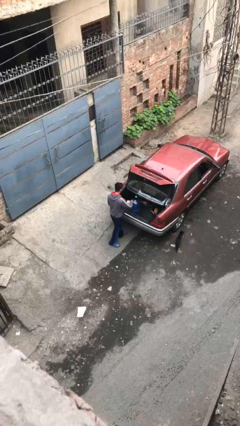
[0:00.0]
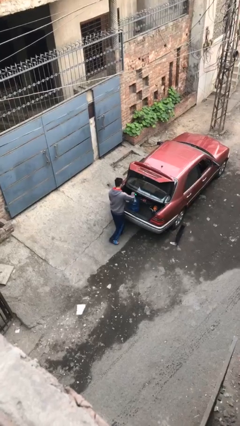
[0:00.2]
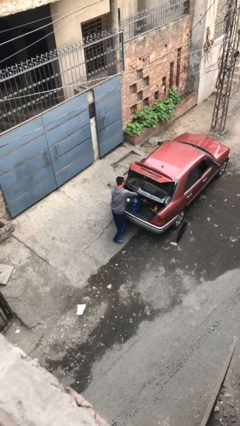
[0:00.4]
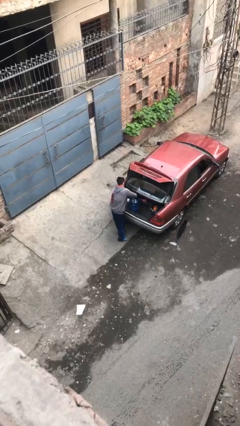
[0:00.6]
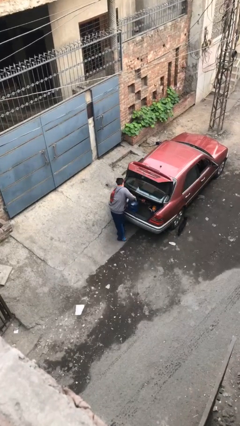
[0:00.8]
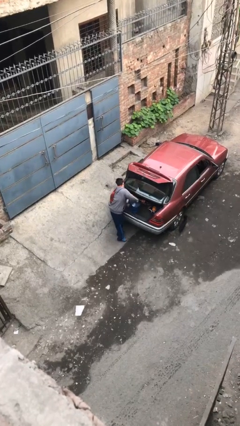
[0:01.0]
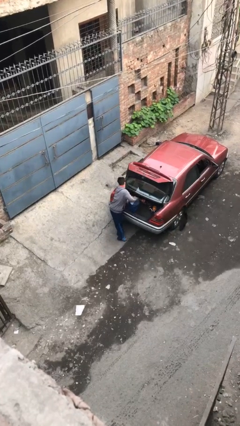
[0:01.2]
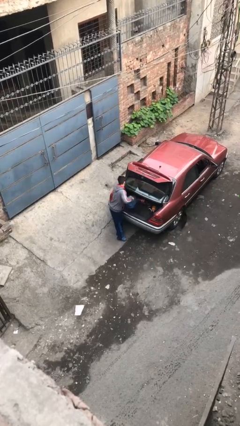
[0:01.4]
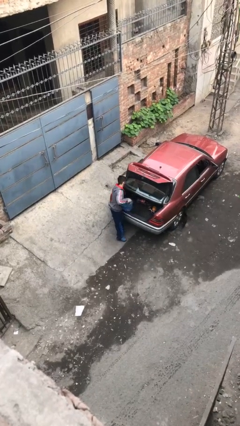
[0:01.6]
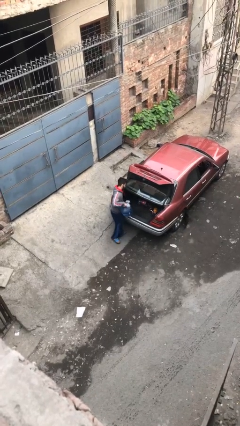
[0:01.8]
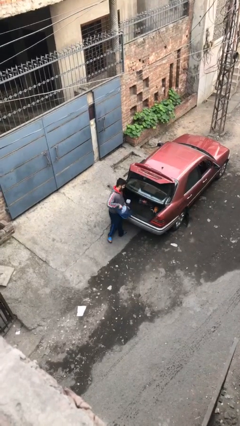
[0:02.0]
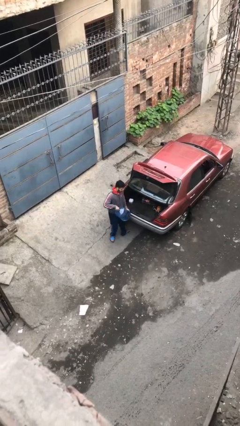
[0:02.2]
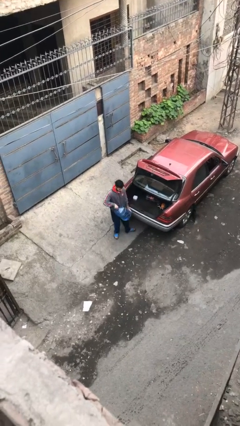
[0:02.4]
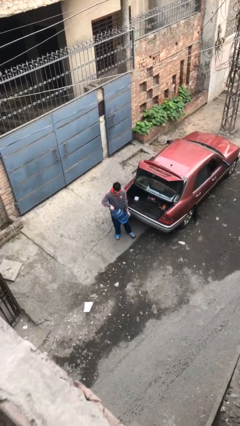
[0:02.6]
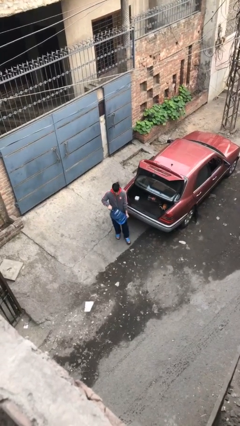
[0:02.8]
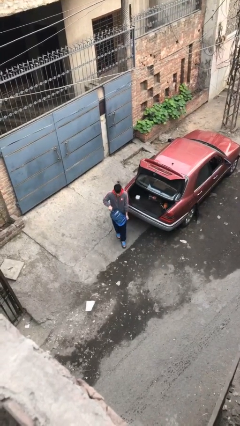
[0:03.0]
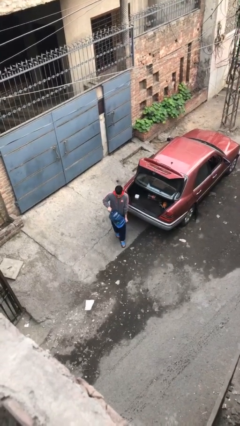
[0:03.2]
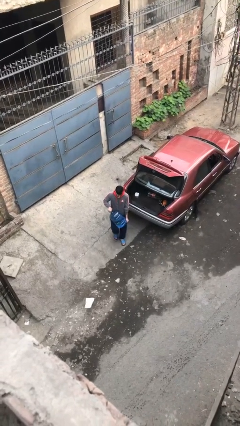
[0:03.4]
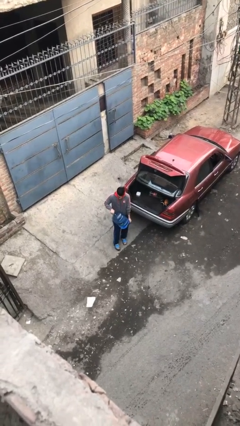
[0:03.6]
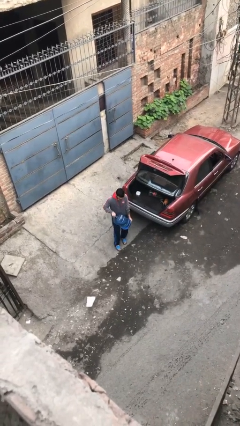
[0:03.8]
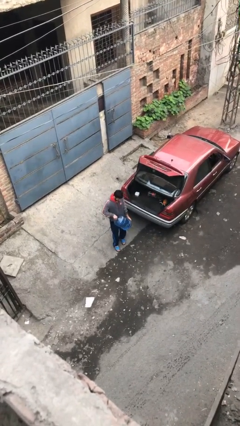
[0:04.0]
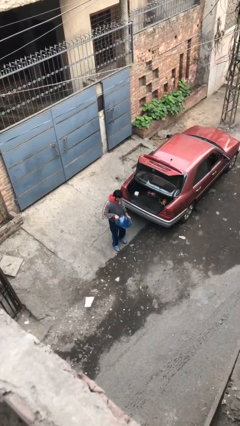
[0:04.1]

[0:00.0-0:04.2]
person unloads car

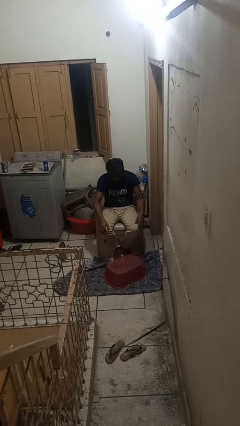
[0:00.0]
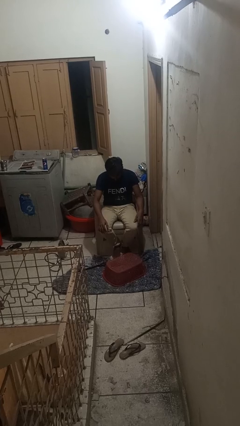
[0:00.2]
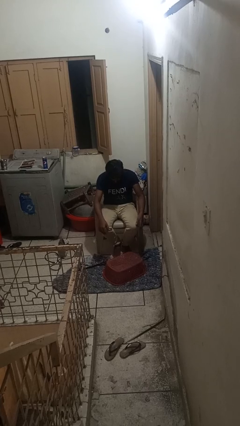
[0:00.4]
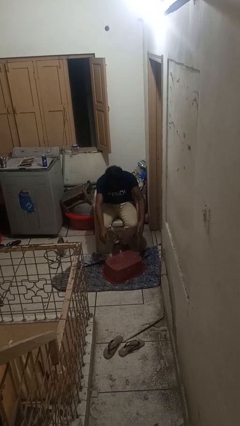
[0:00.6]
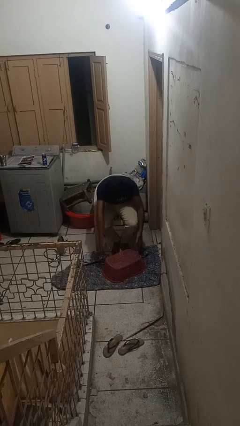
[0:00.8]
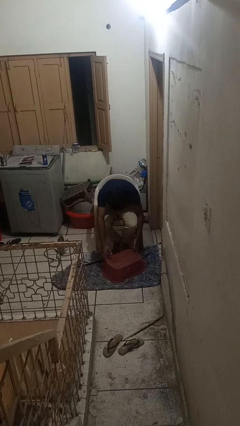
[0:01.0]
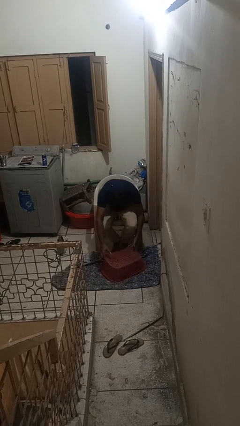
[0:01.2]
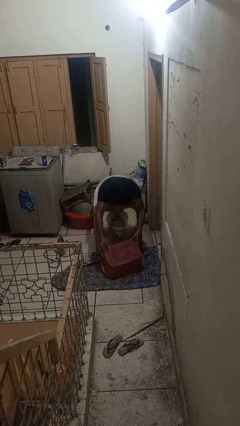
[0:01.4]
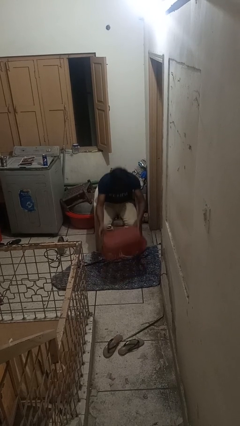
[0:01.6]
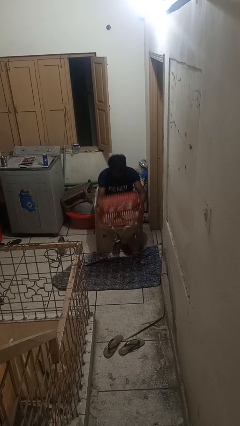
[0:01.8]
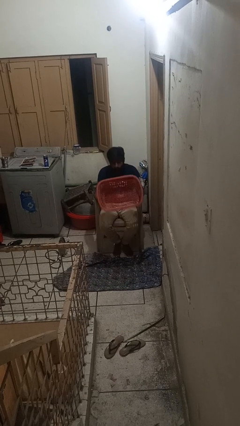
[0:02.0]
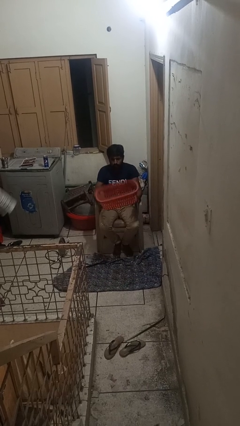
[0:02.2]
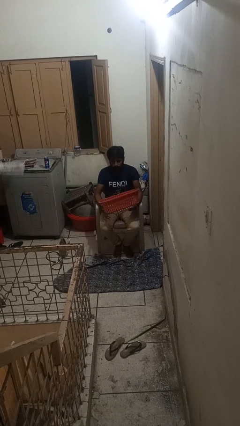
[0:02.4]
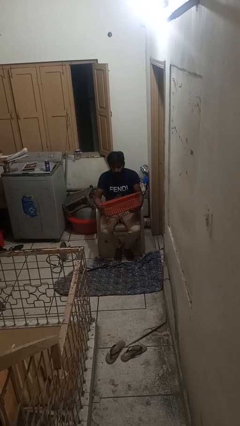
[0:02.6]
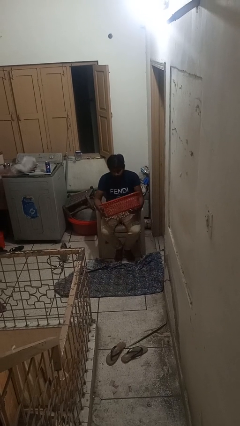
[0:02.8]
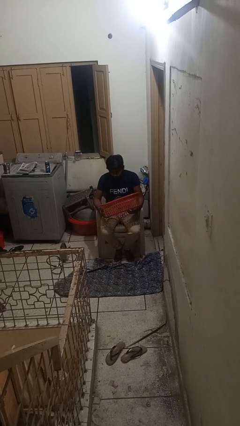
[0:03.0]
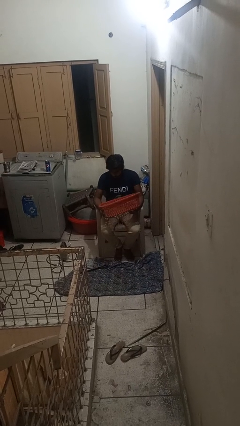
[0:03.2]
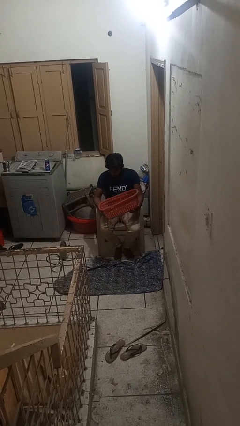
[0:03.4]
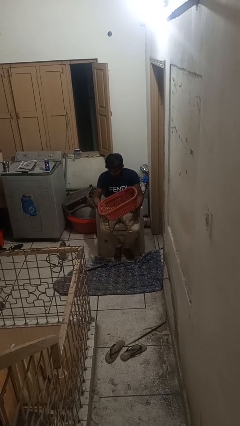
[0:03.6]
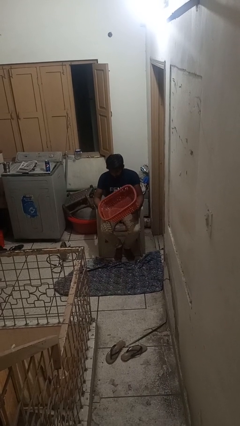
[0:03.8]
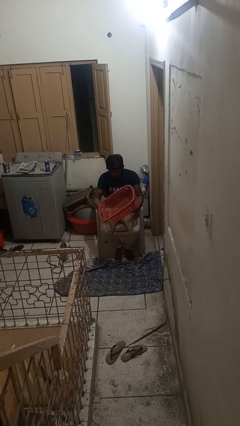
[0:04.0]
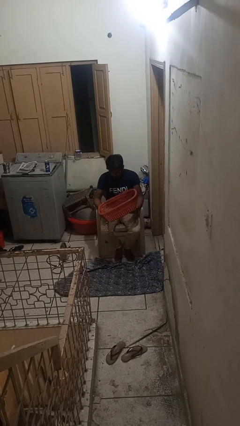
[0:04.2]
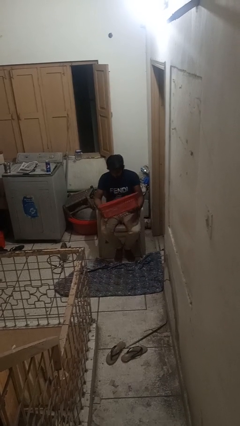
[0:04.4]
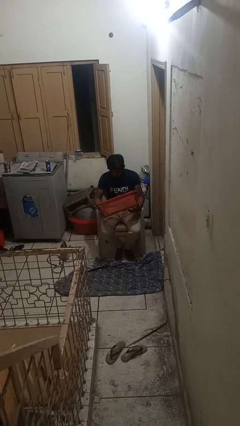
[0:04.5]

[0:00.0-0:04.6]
person picks up object from floor

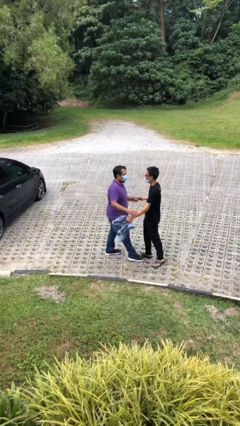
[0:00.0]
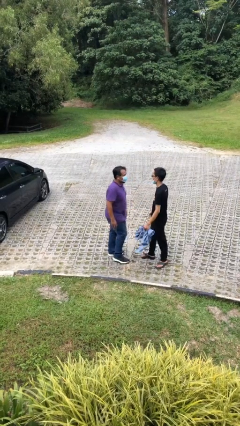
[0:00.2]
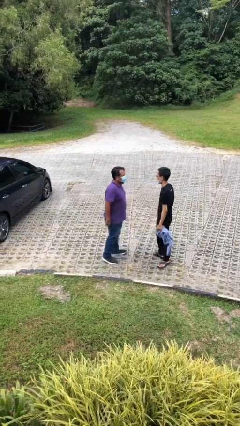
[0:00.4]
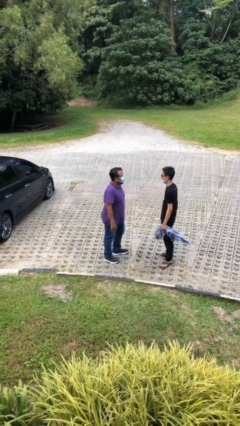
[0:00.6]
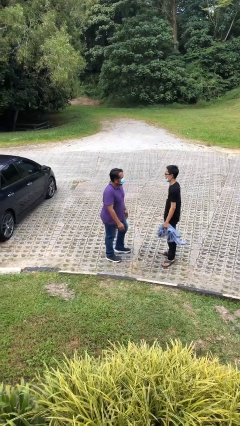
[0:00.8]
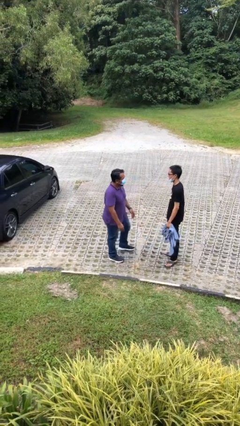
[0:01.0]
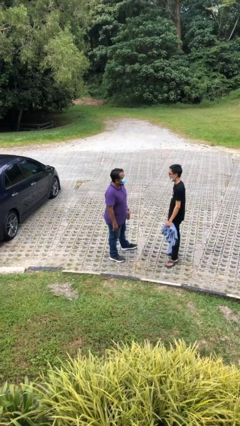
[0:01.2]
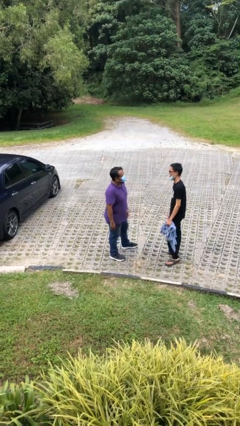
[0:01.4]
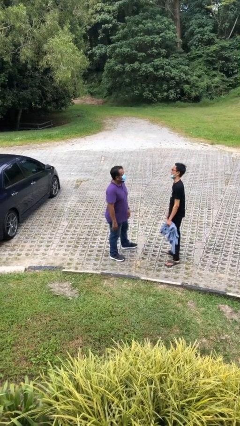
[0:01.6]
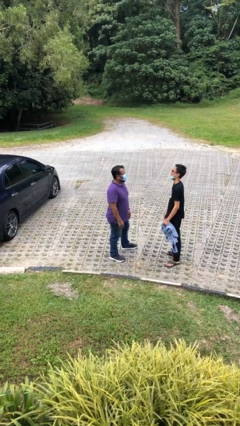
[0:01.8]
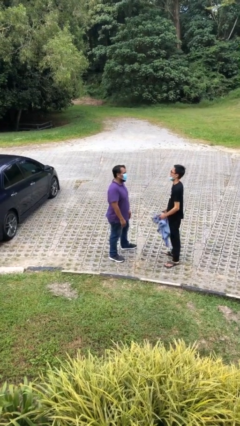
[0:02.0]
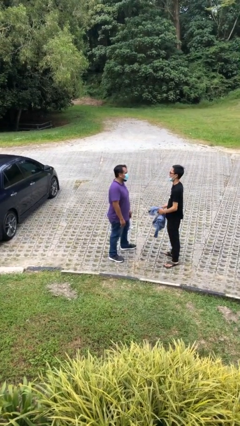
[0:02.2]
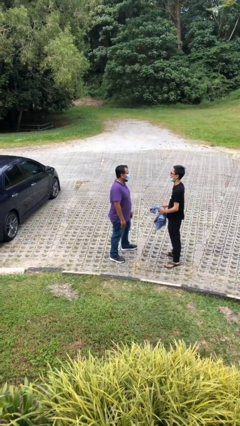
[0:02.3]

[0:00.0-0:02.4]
person talks to person

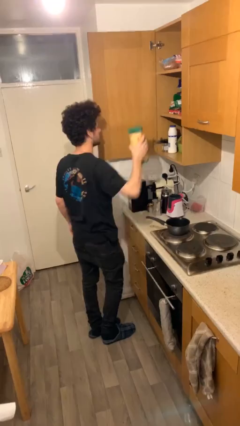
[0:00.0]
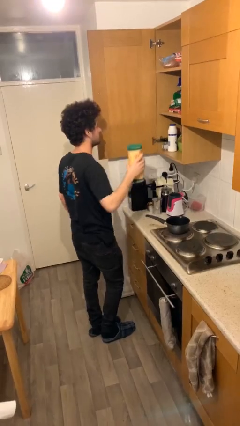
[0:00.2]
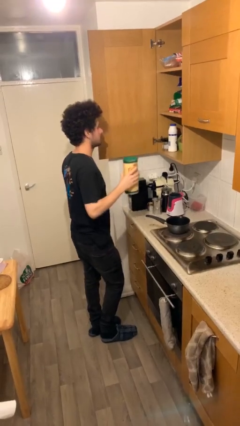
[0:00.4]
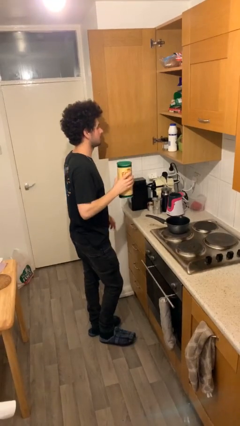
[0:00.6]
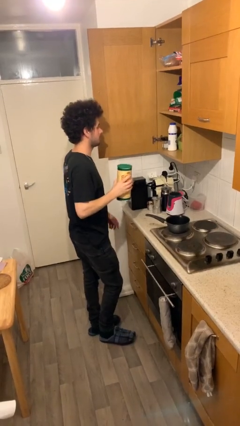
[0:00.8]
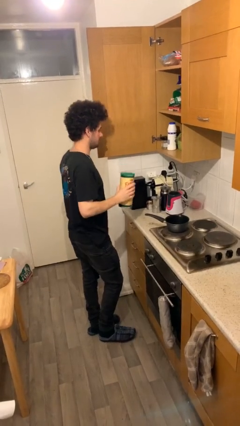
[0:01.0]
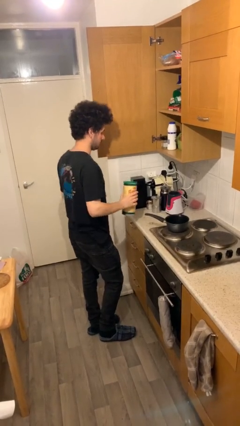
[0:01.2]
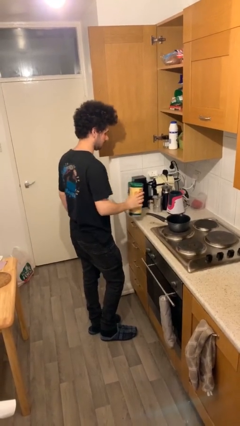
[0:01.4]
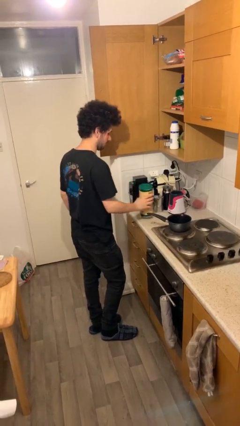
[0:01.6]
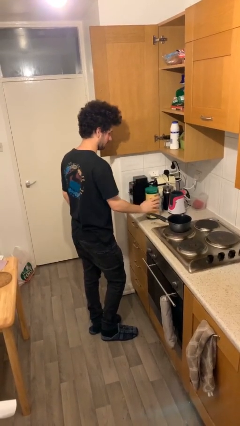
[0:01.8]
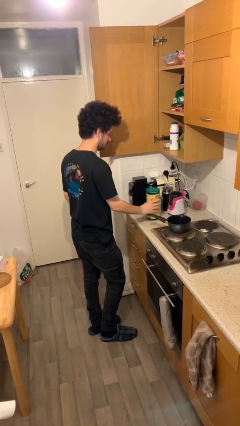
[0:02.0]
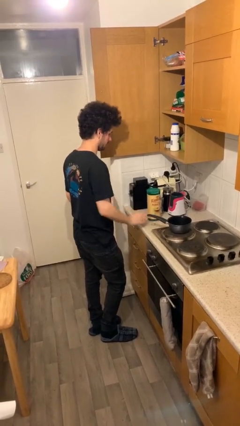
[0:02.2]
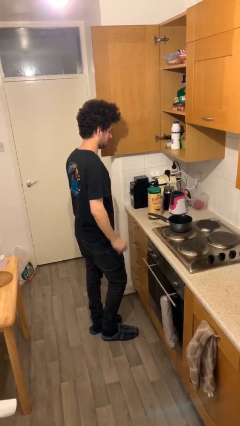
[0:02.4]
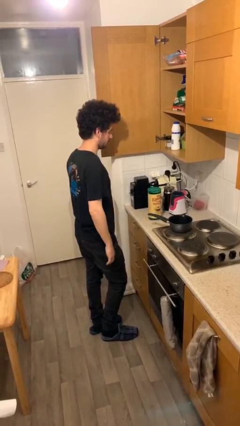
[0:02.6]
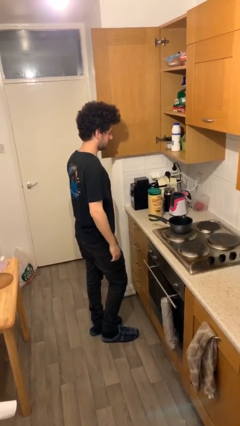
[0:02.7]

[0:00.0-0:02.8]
person puts down object on table

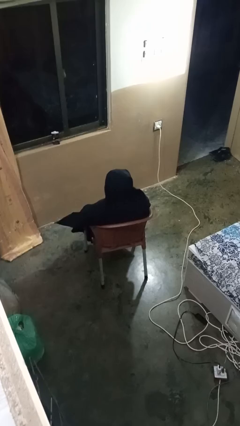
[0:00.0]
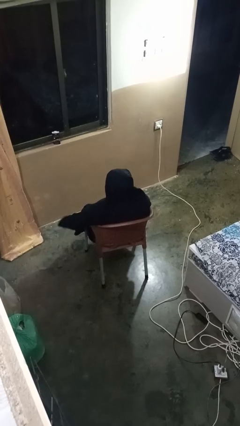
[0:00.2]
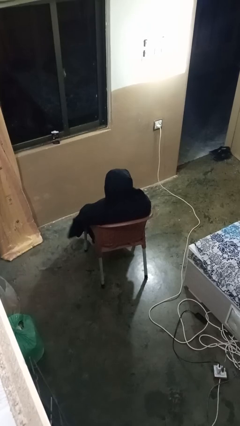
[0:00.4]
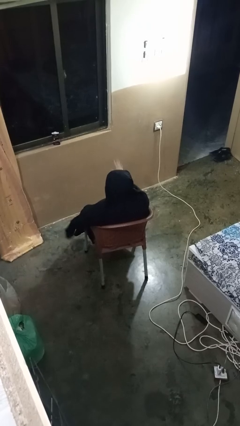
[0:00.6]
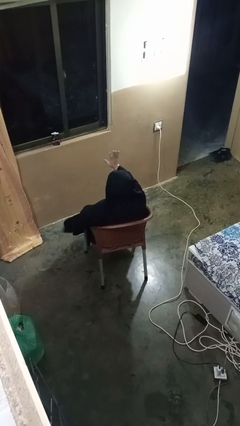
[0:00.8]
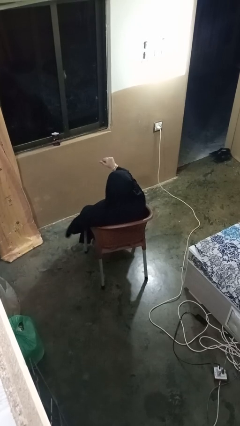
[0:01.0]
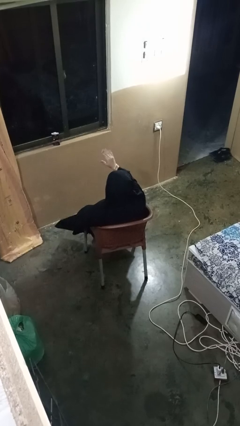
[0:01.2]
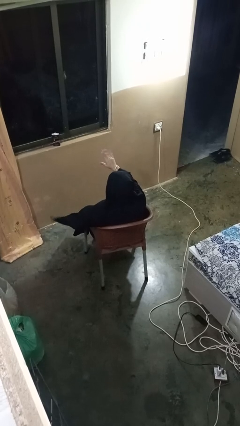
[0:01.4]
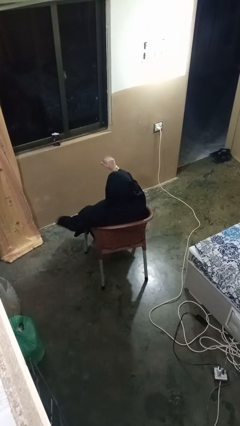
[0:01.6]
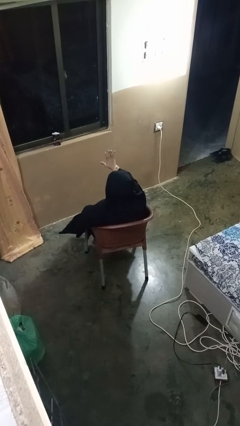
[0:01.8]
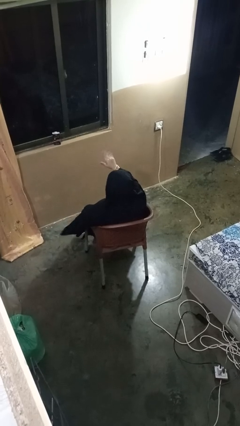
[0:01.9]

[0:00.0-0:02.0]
person gestures come here

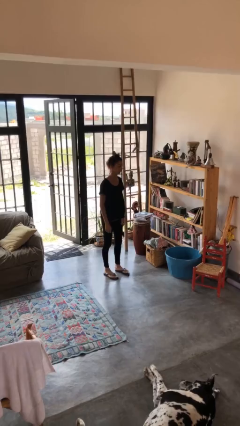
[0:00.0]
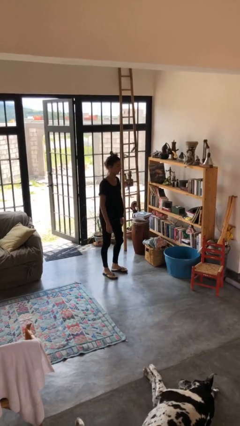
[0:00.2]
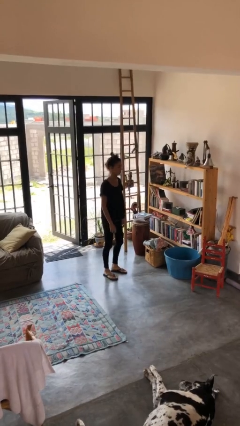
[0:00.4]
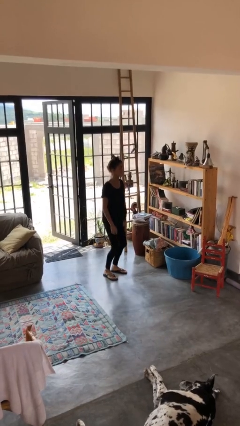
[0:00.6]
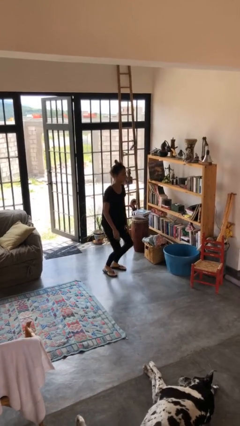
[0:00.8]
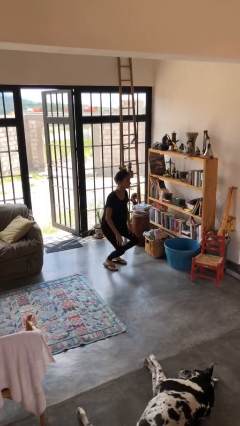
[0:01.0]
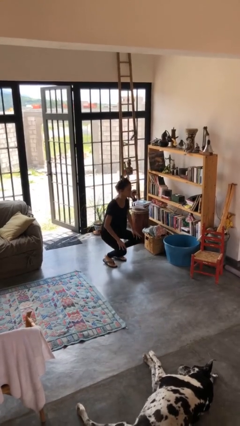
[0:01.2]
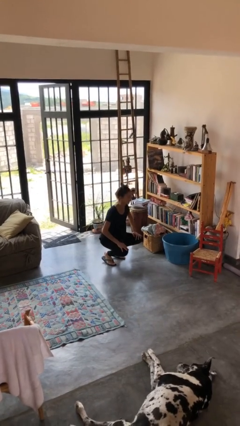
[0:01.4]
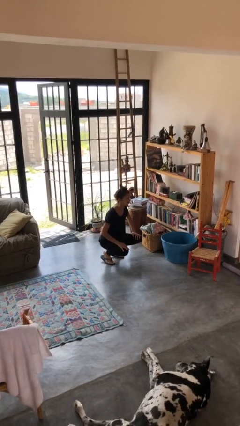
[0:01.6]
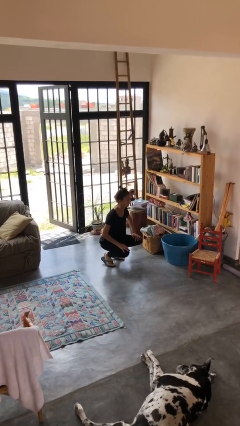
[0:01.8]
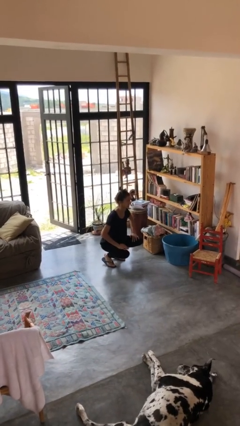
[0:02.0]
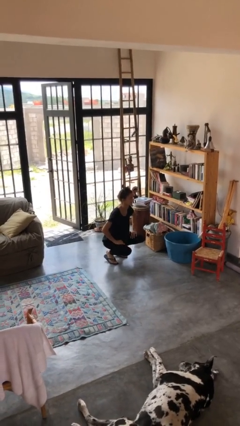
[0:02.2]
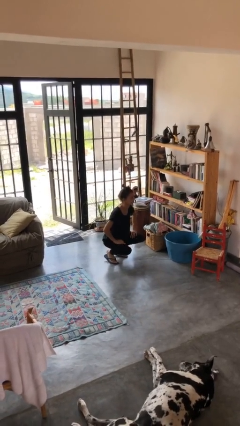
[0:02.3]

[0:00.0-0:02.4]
person squats
